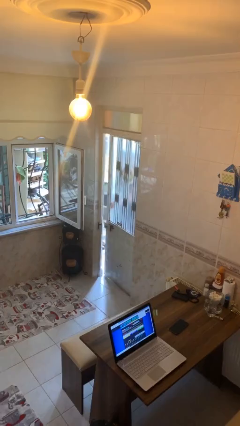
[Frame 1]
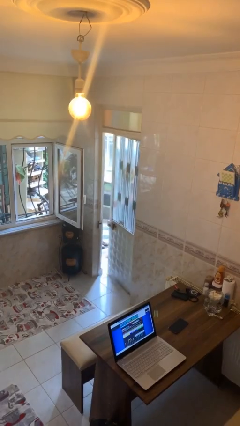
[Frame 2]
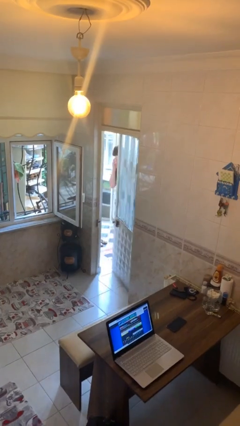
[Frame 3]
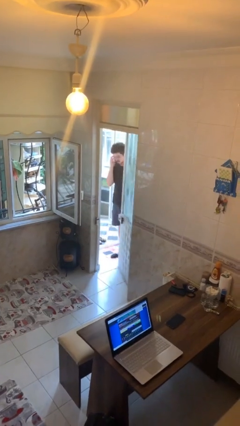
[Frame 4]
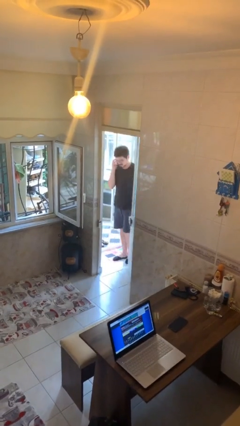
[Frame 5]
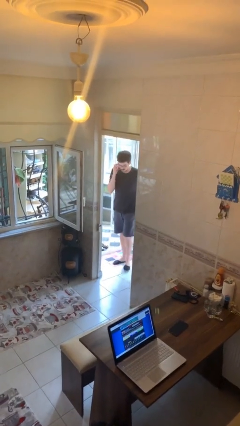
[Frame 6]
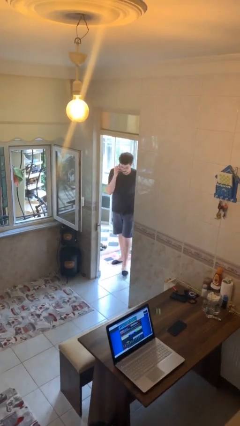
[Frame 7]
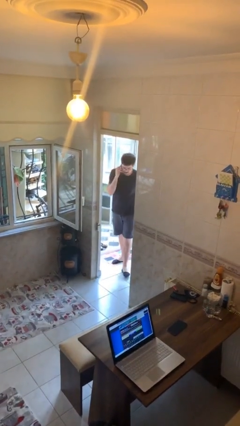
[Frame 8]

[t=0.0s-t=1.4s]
person opens facility door

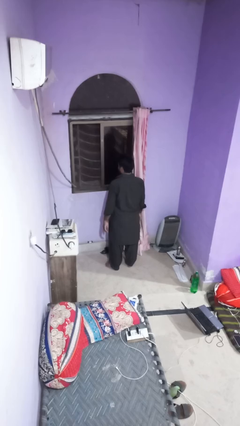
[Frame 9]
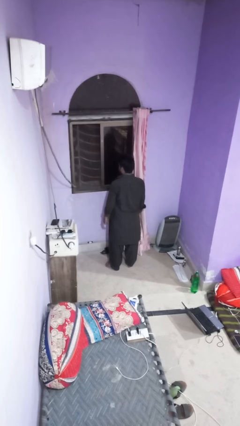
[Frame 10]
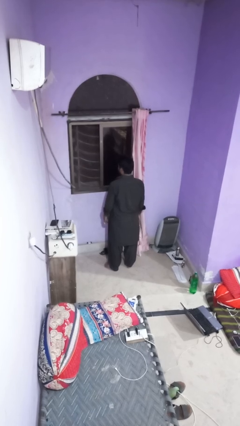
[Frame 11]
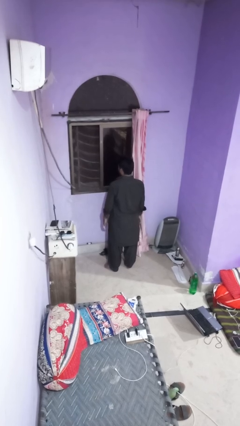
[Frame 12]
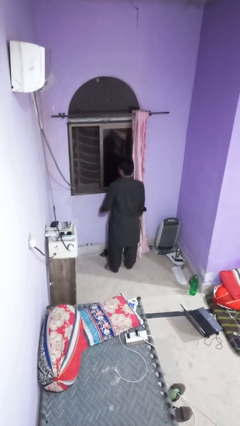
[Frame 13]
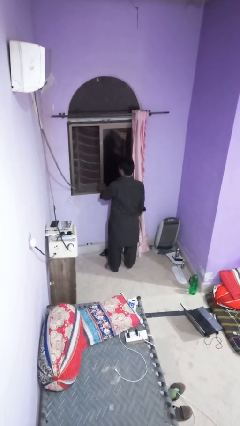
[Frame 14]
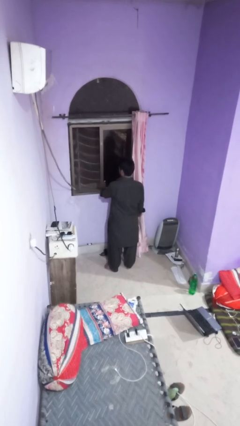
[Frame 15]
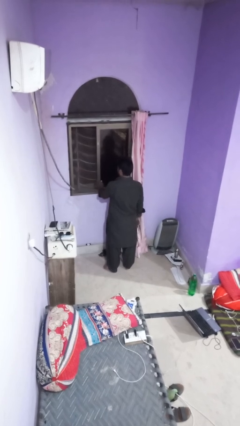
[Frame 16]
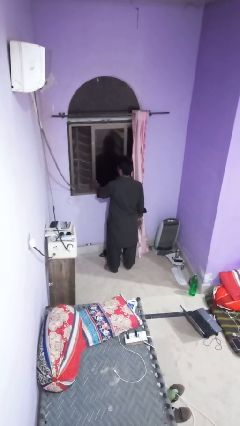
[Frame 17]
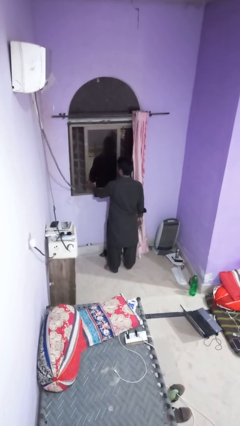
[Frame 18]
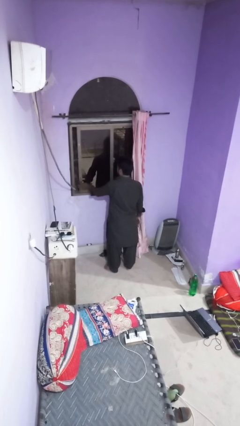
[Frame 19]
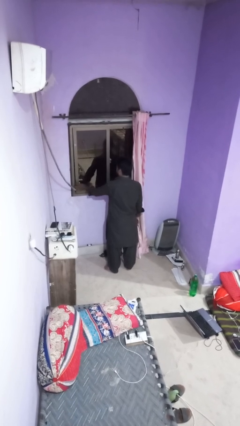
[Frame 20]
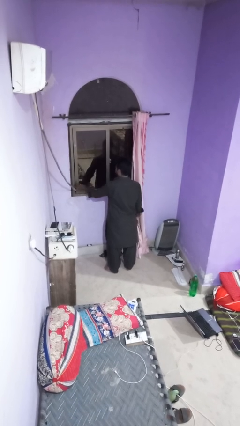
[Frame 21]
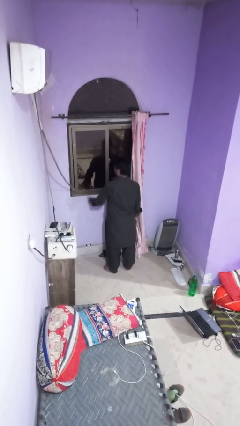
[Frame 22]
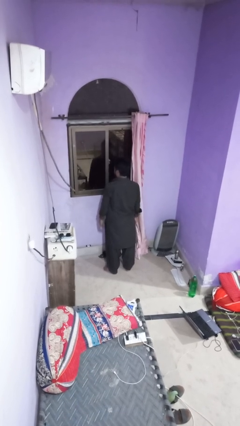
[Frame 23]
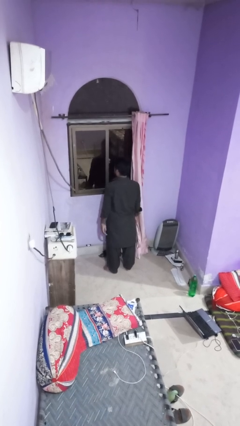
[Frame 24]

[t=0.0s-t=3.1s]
person closes home window

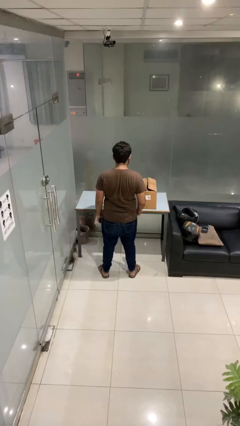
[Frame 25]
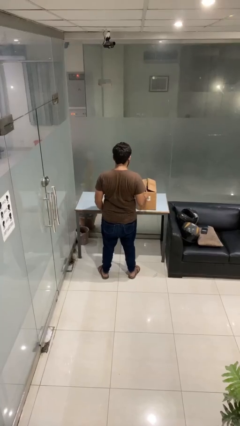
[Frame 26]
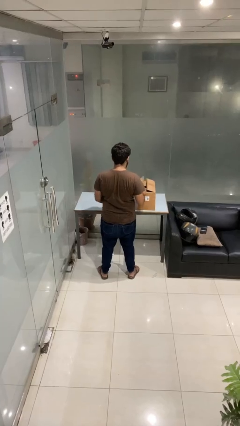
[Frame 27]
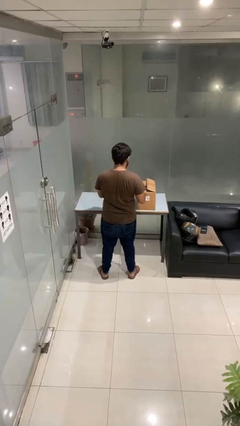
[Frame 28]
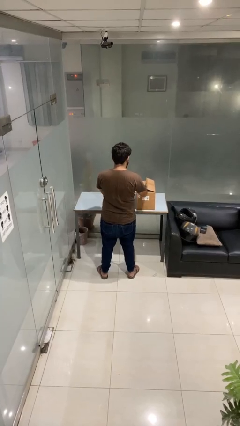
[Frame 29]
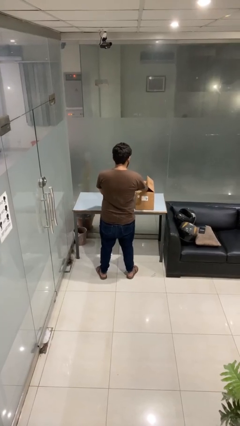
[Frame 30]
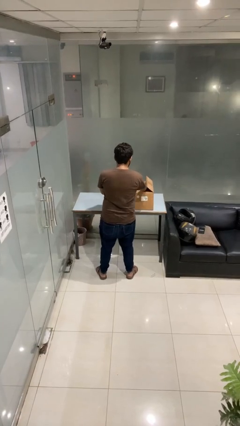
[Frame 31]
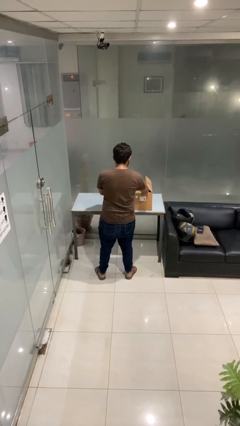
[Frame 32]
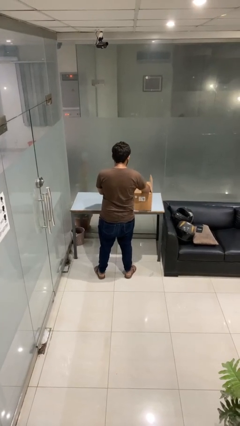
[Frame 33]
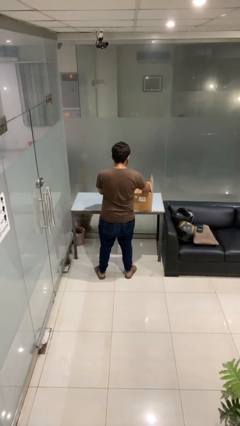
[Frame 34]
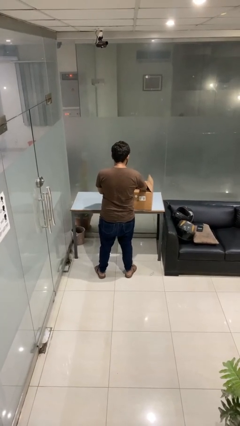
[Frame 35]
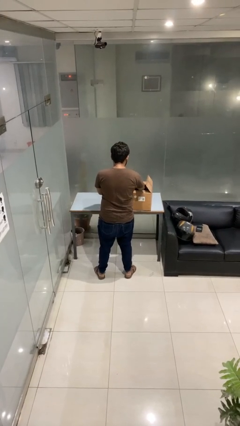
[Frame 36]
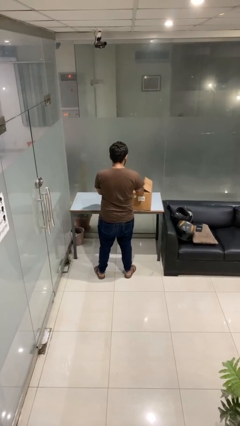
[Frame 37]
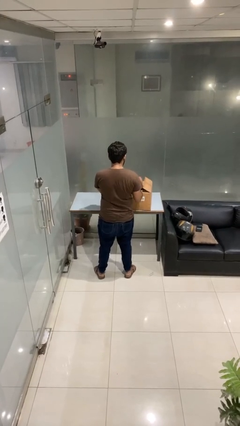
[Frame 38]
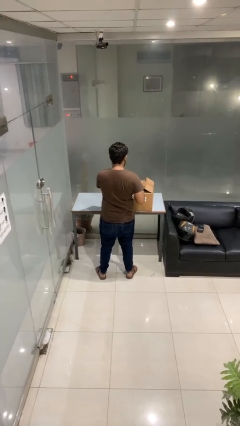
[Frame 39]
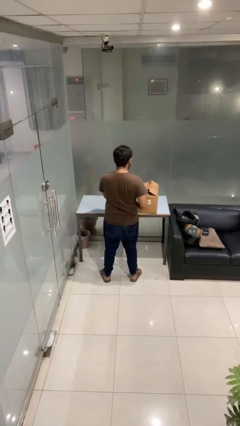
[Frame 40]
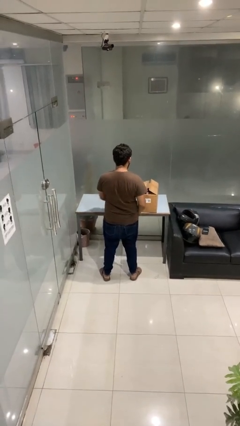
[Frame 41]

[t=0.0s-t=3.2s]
person searches in box

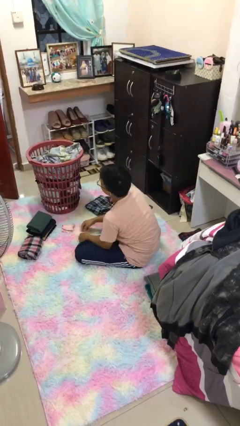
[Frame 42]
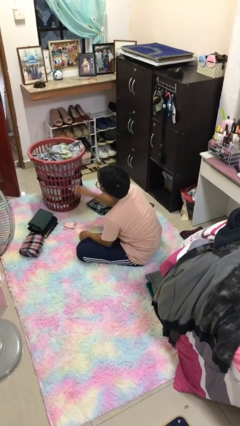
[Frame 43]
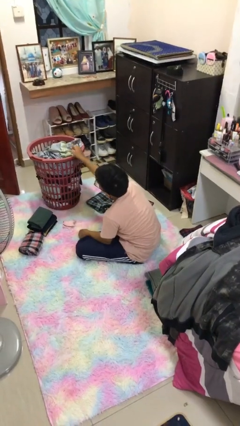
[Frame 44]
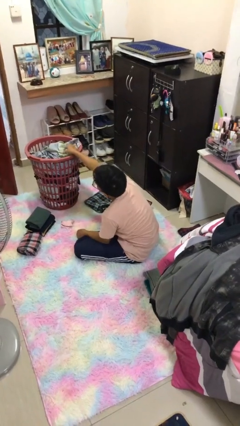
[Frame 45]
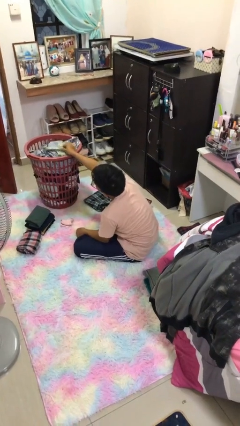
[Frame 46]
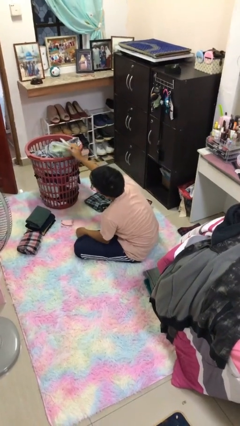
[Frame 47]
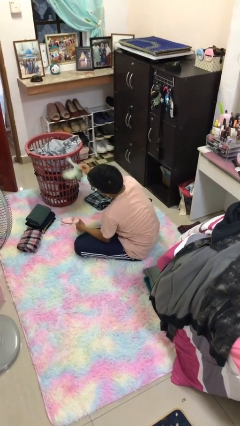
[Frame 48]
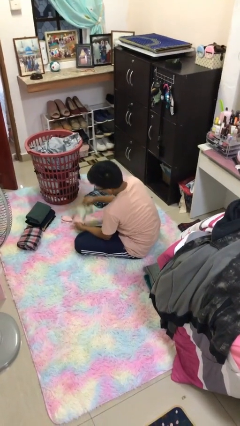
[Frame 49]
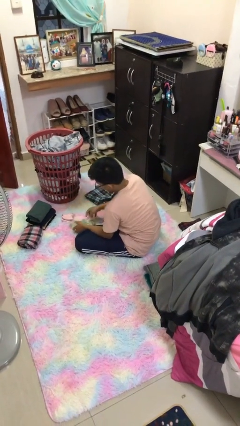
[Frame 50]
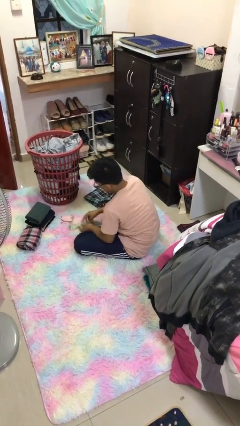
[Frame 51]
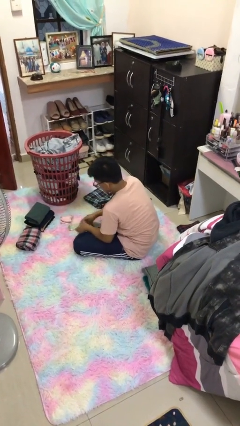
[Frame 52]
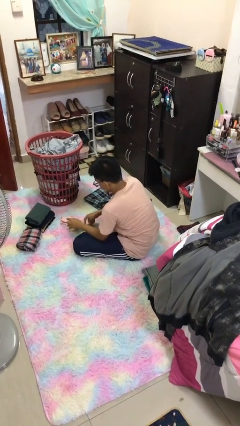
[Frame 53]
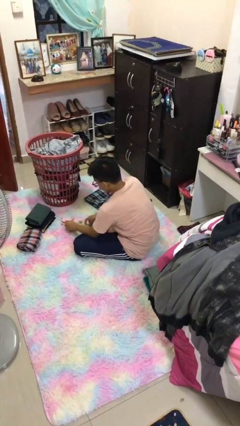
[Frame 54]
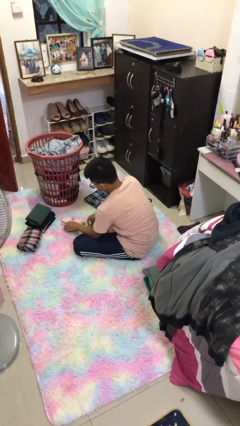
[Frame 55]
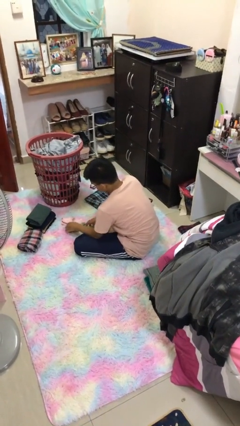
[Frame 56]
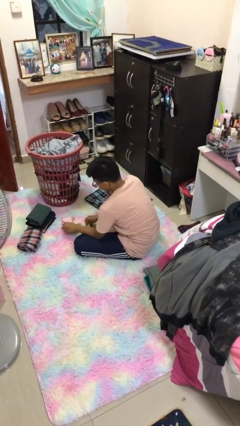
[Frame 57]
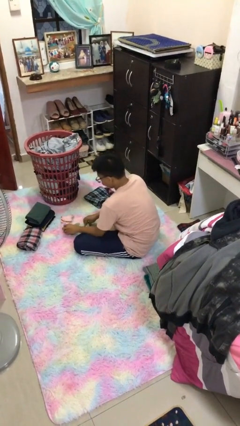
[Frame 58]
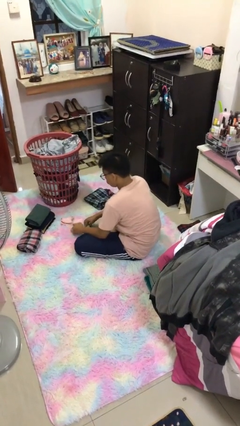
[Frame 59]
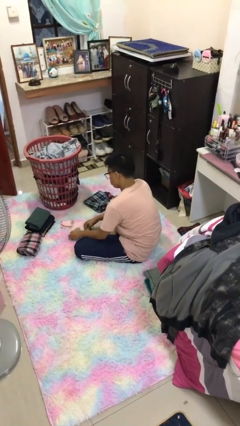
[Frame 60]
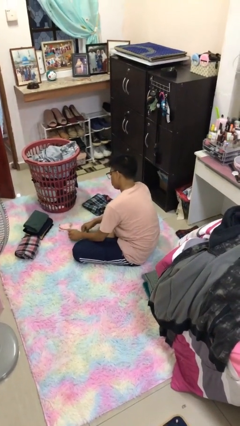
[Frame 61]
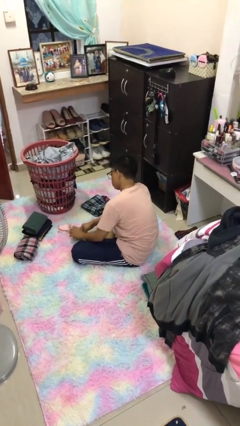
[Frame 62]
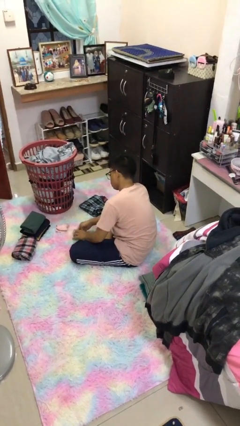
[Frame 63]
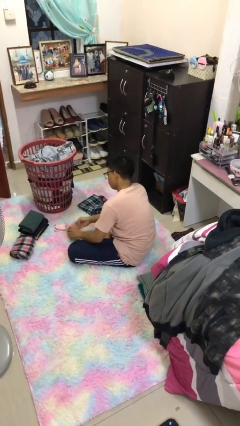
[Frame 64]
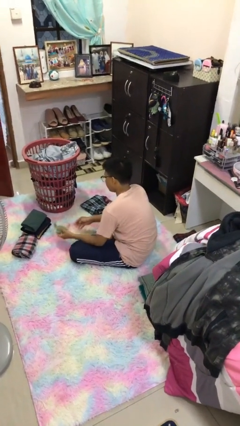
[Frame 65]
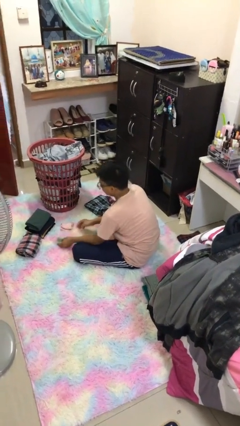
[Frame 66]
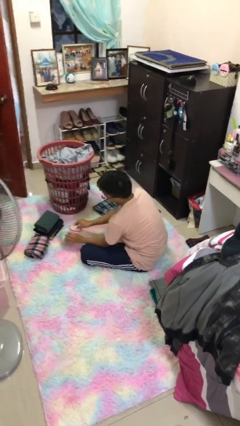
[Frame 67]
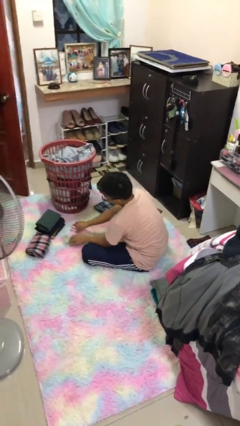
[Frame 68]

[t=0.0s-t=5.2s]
person folds socks

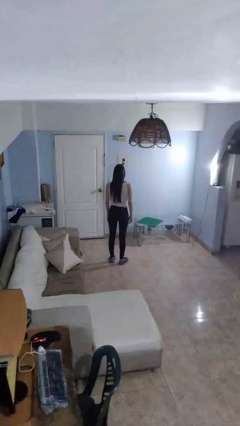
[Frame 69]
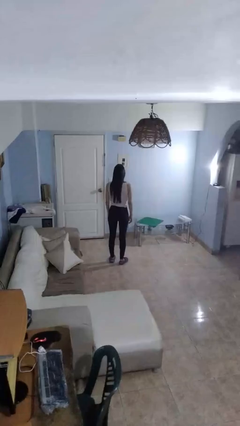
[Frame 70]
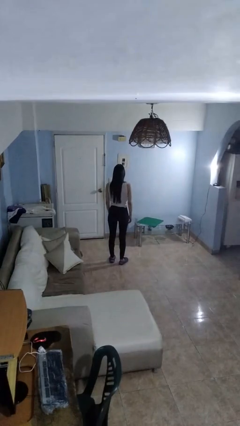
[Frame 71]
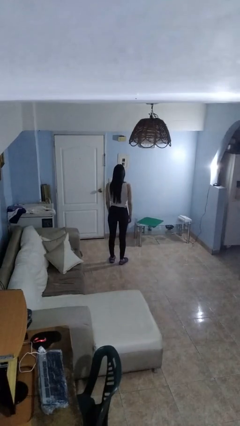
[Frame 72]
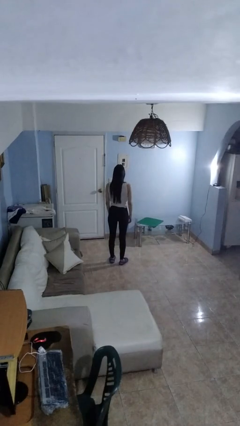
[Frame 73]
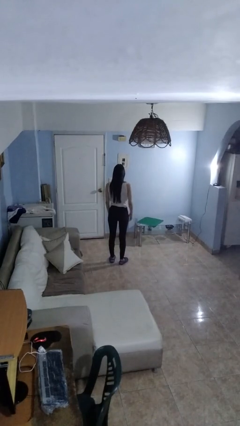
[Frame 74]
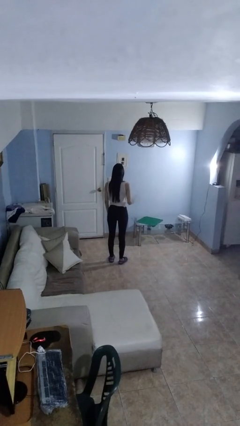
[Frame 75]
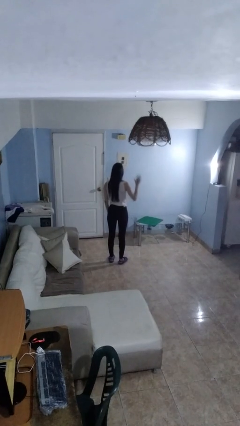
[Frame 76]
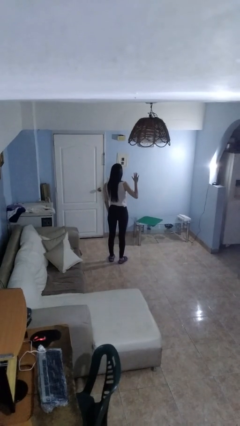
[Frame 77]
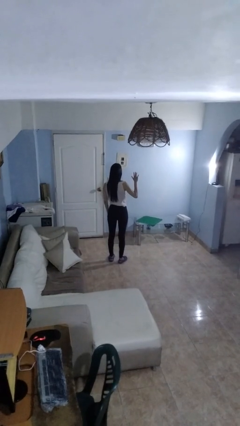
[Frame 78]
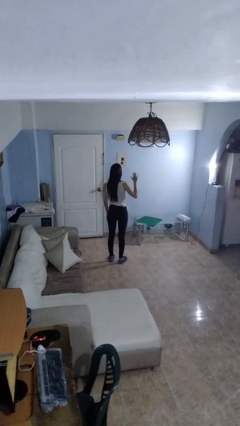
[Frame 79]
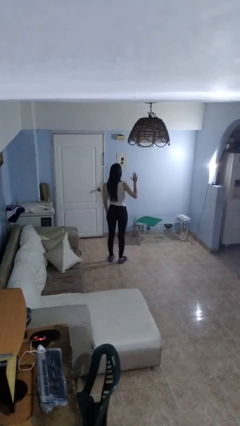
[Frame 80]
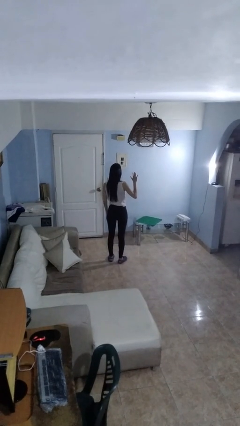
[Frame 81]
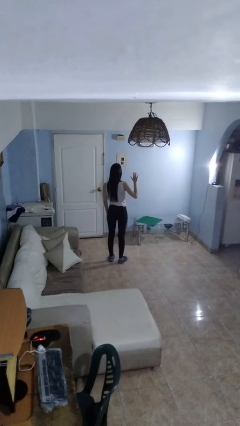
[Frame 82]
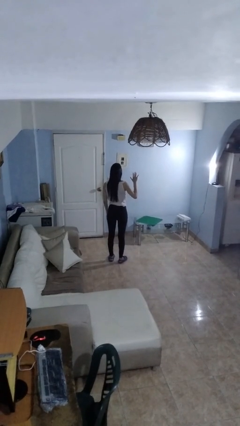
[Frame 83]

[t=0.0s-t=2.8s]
person gestures number five

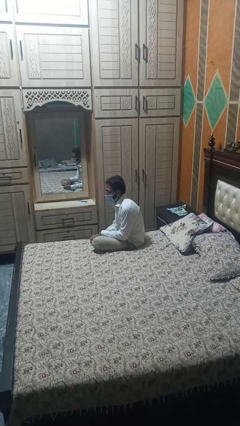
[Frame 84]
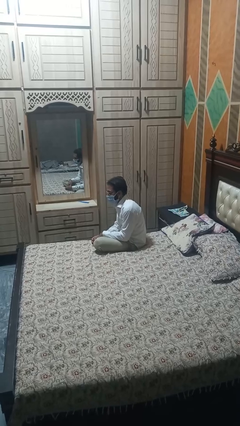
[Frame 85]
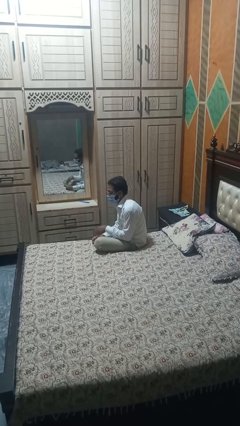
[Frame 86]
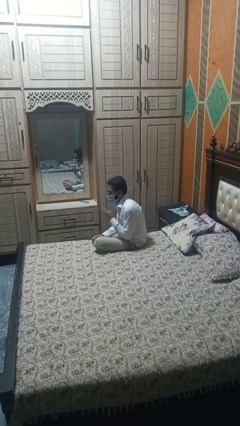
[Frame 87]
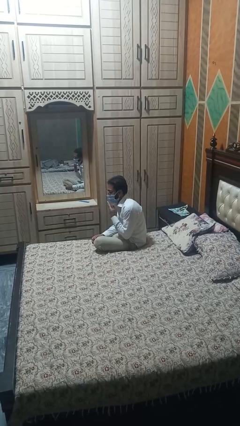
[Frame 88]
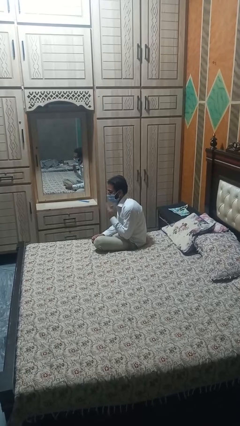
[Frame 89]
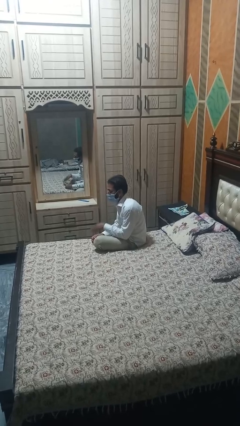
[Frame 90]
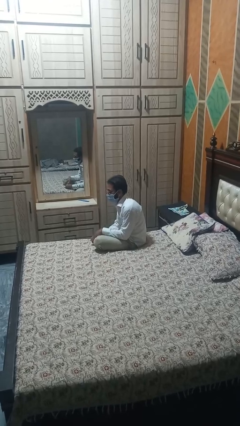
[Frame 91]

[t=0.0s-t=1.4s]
person strokes chin
